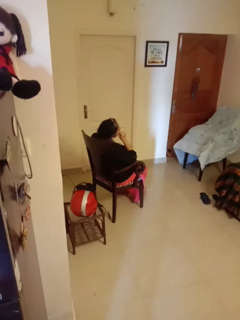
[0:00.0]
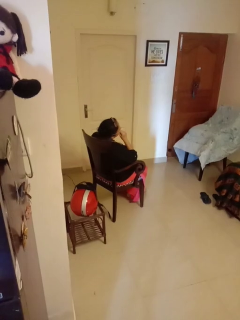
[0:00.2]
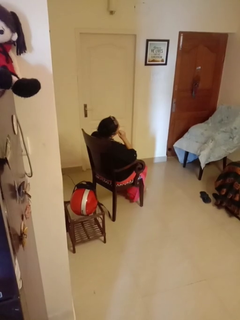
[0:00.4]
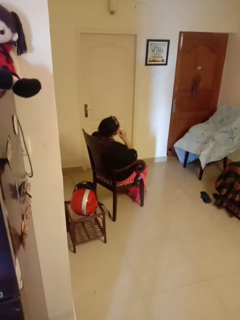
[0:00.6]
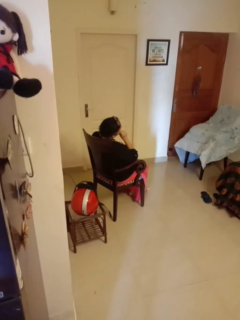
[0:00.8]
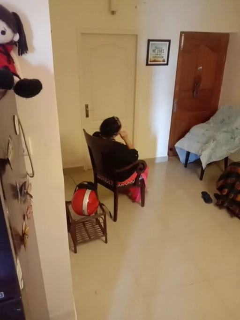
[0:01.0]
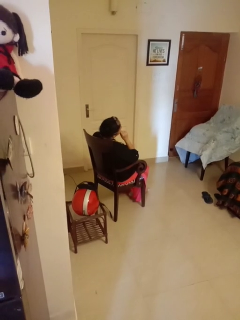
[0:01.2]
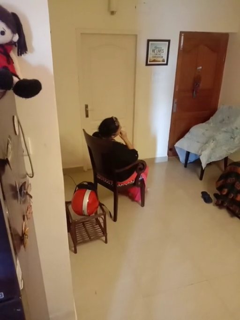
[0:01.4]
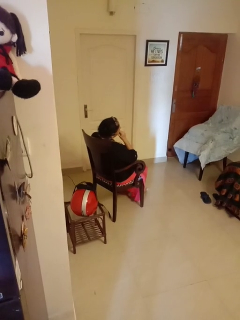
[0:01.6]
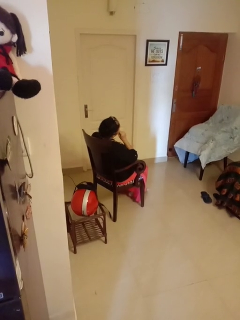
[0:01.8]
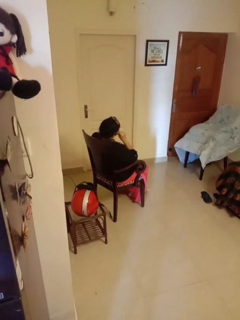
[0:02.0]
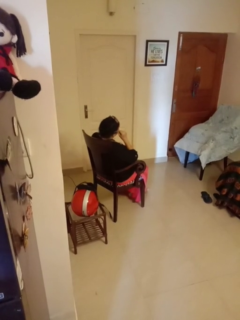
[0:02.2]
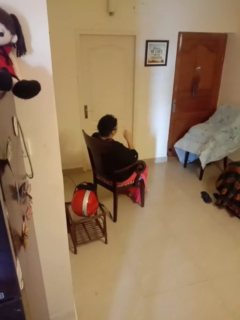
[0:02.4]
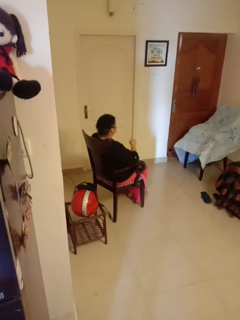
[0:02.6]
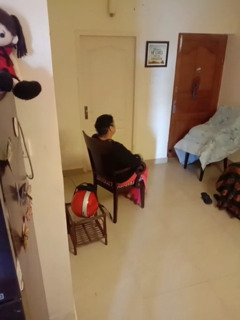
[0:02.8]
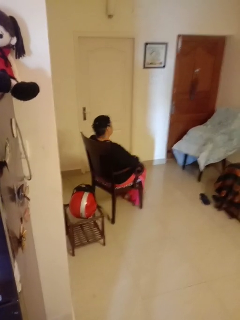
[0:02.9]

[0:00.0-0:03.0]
person strokes chin

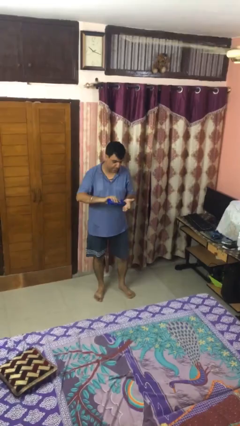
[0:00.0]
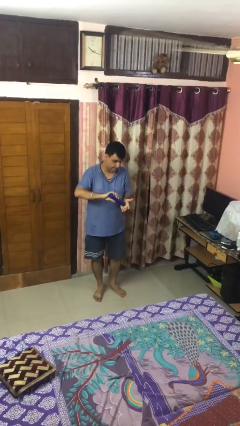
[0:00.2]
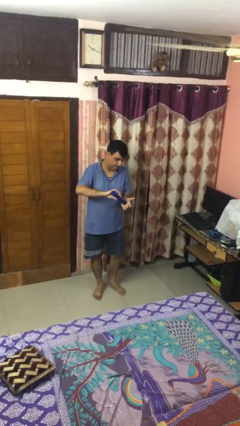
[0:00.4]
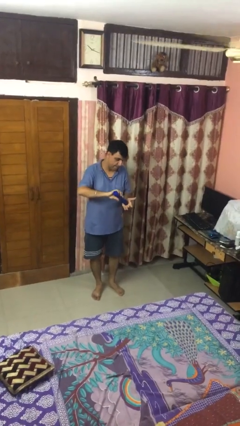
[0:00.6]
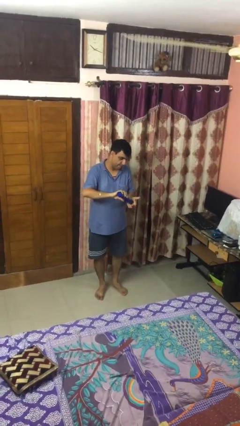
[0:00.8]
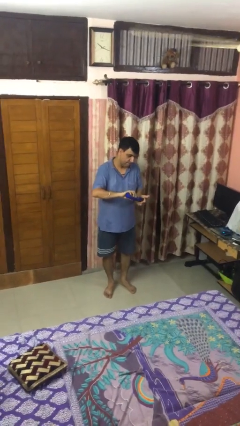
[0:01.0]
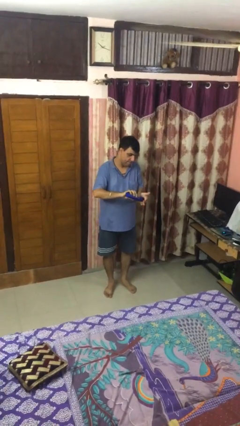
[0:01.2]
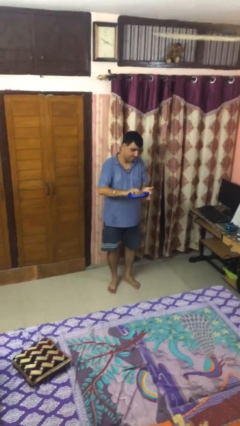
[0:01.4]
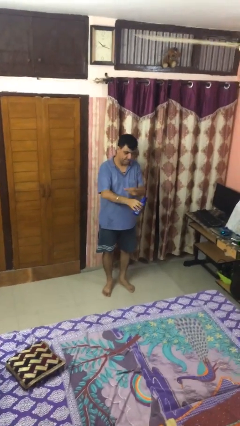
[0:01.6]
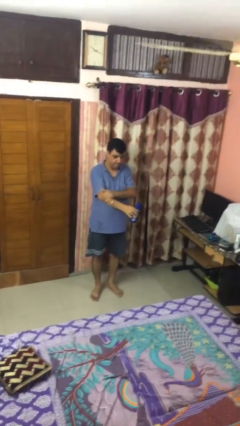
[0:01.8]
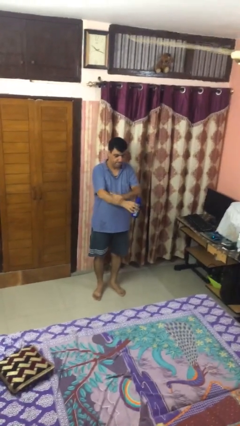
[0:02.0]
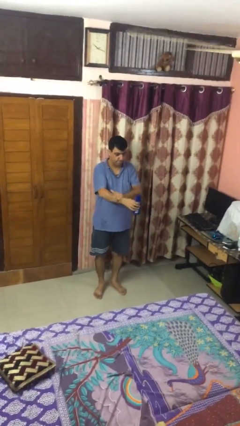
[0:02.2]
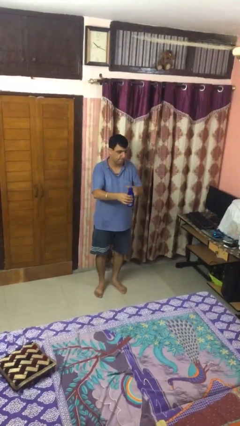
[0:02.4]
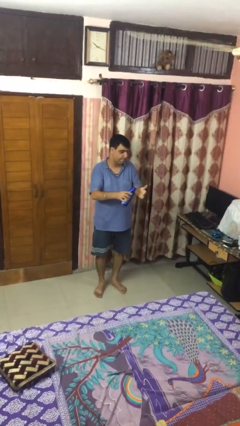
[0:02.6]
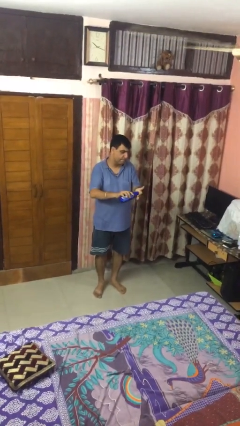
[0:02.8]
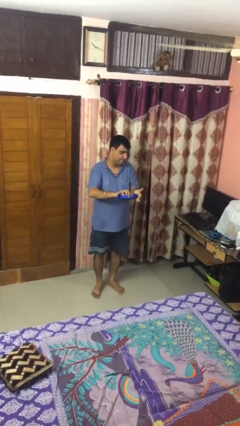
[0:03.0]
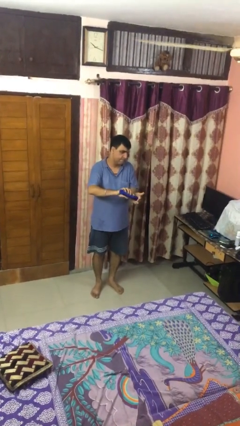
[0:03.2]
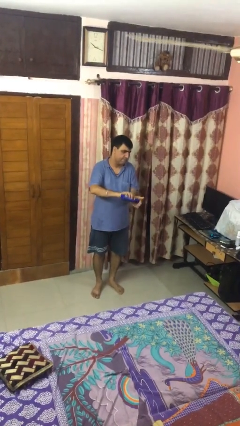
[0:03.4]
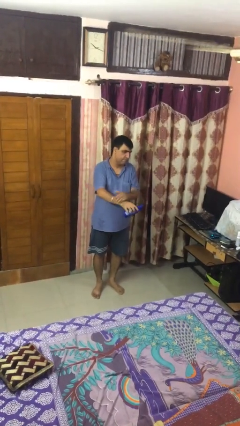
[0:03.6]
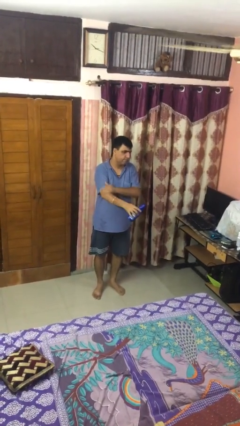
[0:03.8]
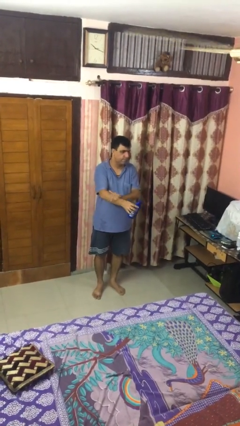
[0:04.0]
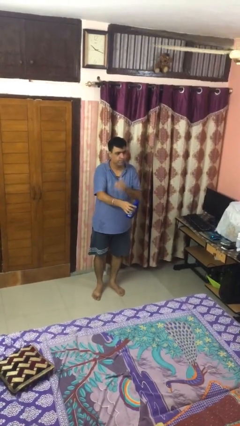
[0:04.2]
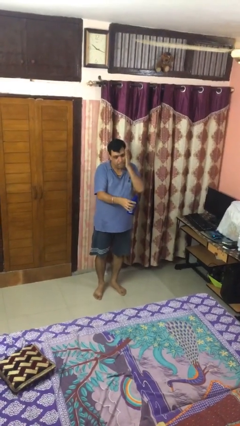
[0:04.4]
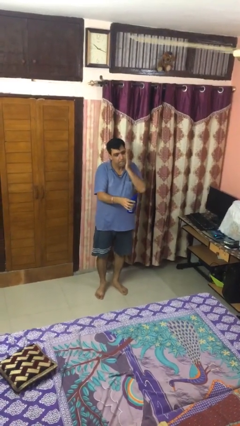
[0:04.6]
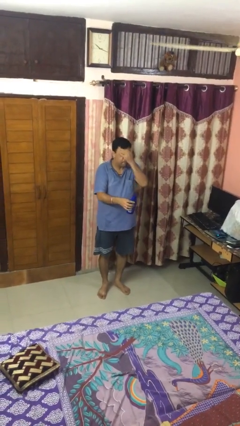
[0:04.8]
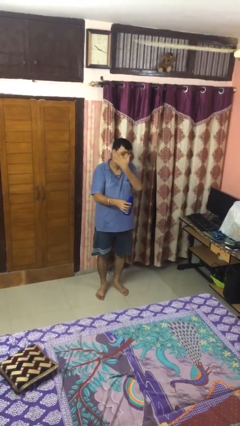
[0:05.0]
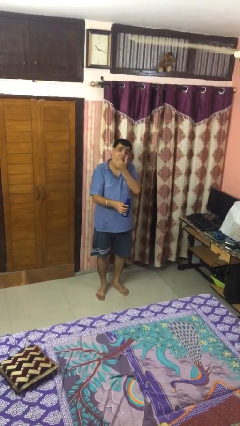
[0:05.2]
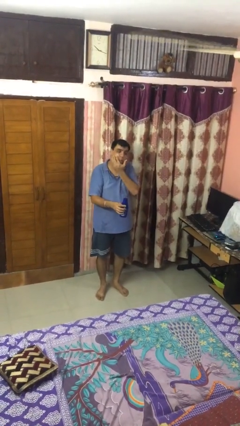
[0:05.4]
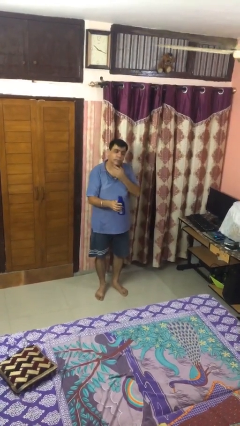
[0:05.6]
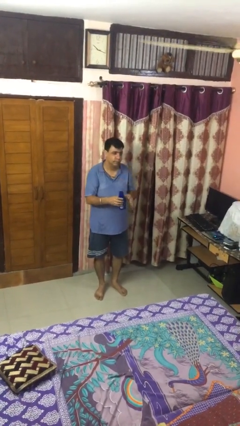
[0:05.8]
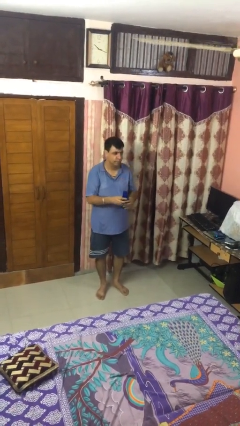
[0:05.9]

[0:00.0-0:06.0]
person applies facial moisturizer

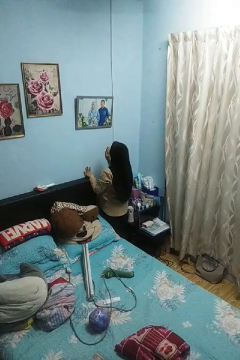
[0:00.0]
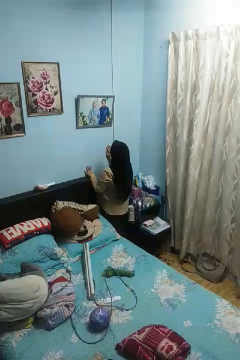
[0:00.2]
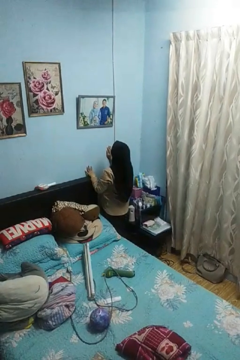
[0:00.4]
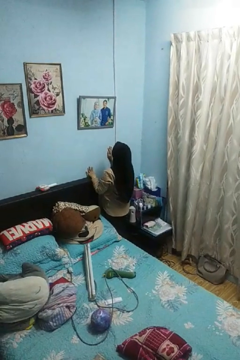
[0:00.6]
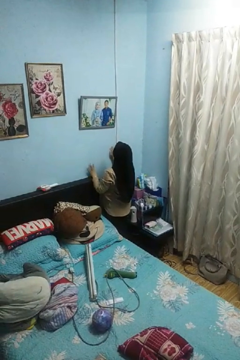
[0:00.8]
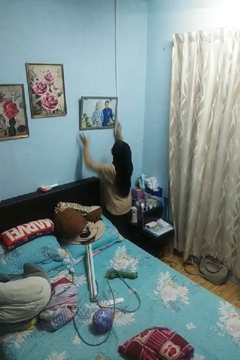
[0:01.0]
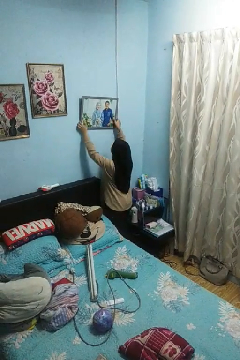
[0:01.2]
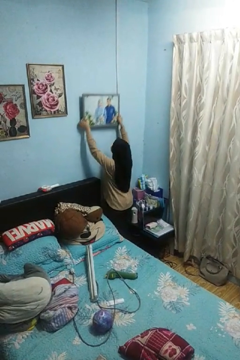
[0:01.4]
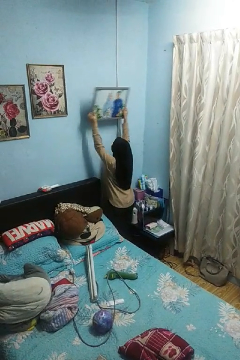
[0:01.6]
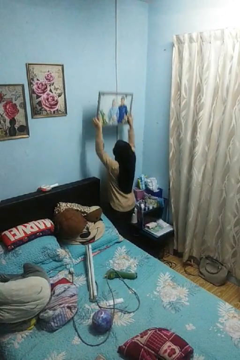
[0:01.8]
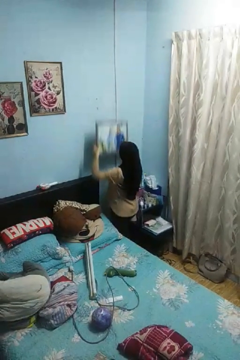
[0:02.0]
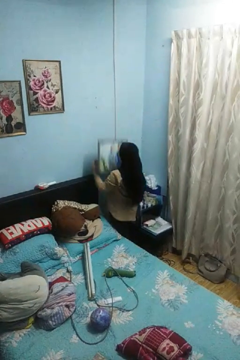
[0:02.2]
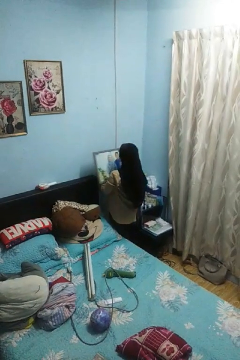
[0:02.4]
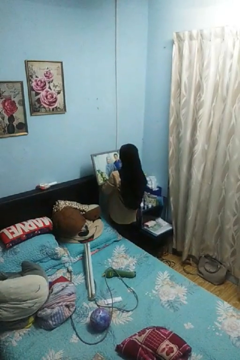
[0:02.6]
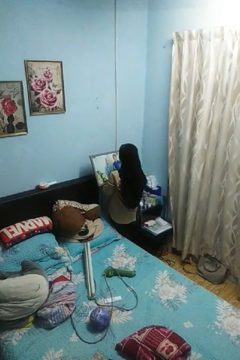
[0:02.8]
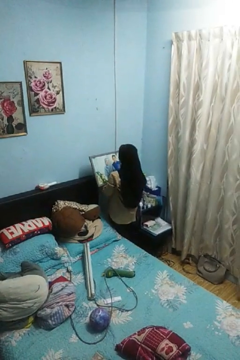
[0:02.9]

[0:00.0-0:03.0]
person takes down picture frame

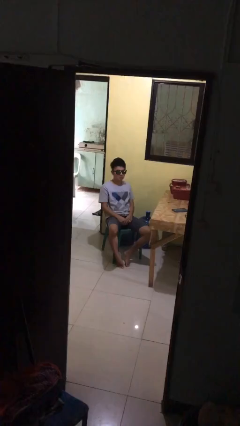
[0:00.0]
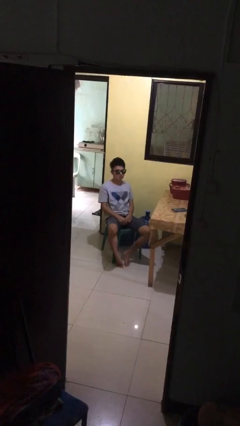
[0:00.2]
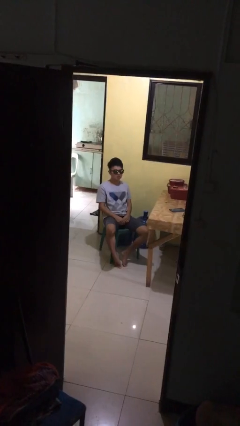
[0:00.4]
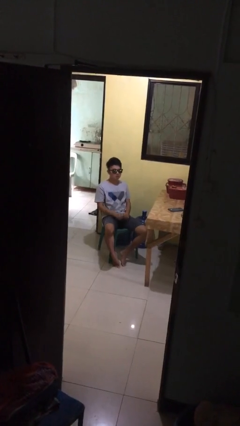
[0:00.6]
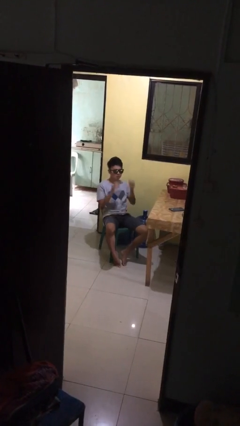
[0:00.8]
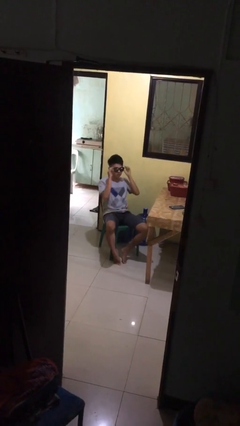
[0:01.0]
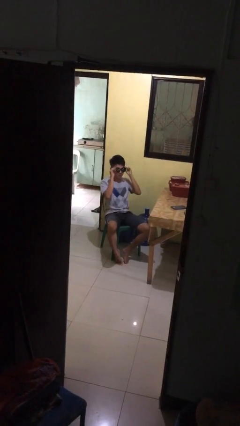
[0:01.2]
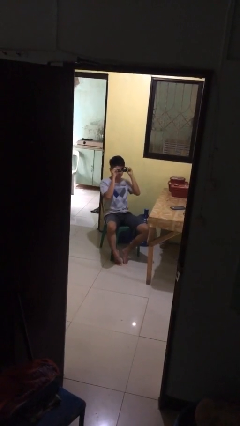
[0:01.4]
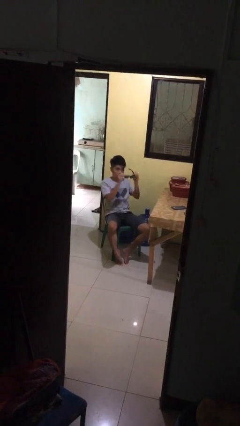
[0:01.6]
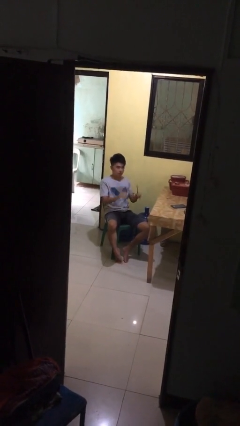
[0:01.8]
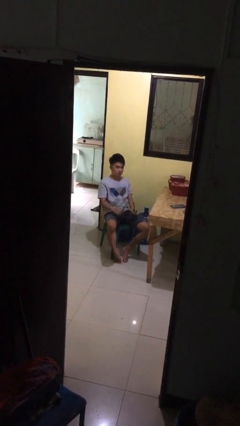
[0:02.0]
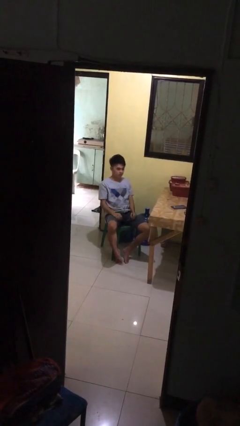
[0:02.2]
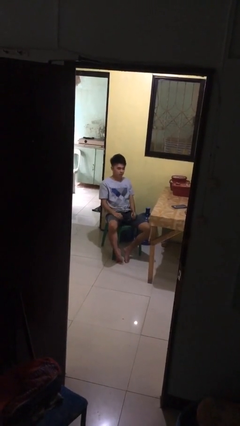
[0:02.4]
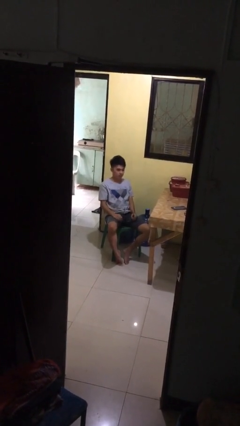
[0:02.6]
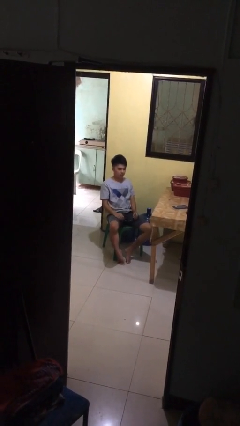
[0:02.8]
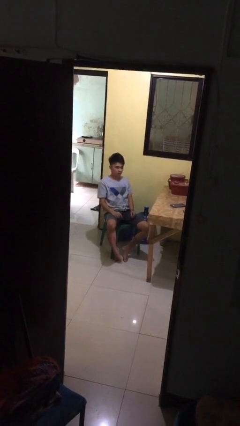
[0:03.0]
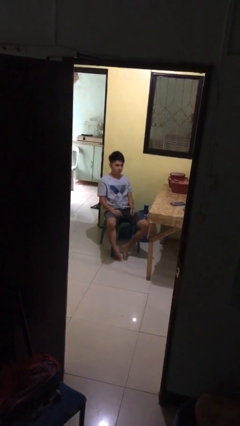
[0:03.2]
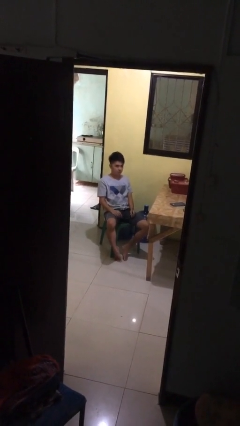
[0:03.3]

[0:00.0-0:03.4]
person takes off sunglasses

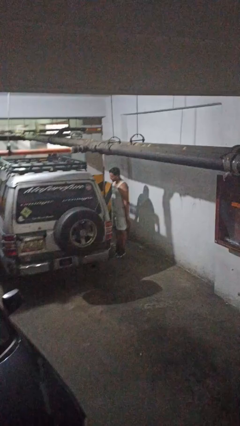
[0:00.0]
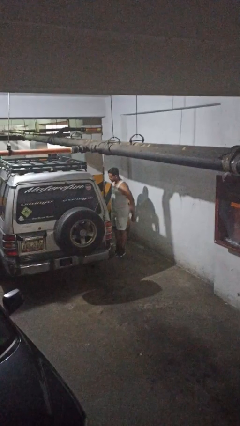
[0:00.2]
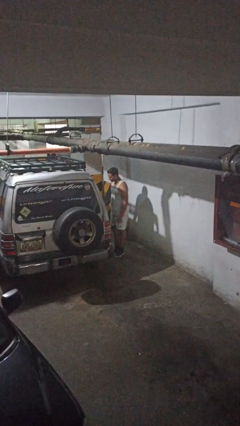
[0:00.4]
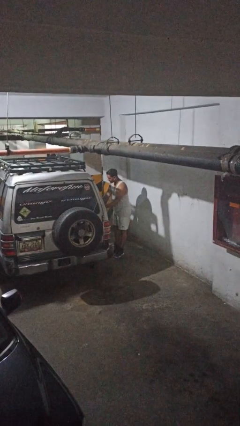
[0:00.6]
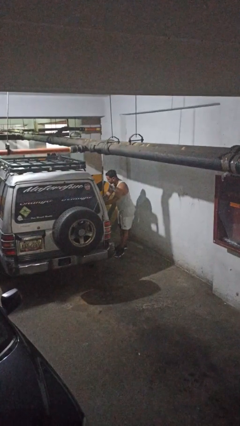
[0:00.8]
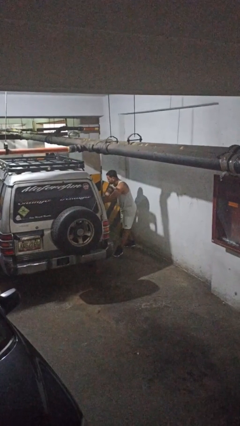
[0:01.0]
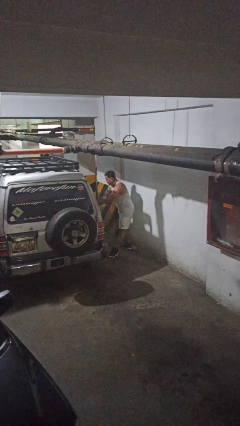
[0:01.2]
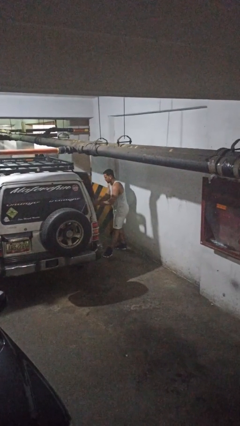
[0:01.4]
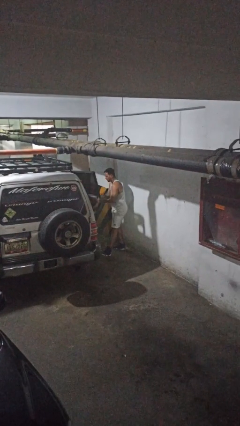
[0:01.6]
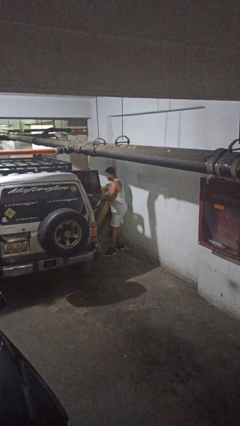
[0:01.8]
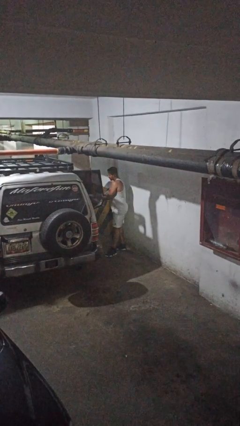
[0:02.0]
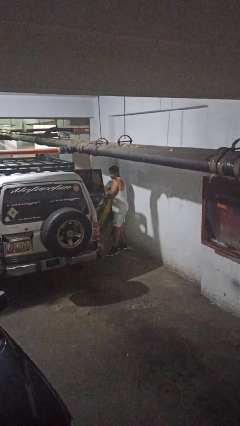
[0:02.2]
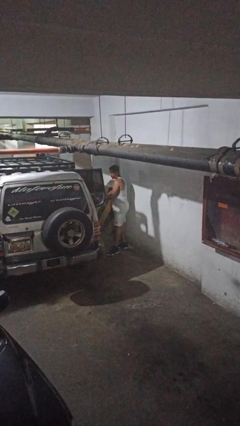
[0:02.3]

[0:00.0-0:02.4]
person opens car door

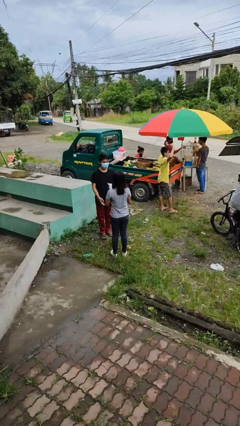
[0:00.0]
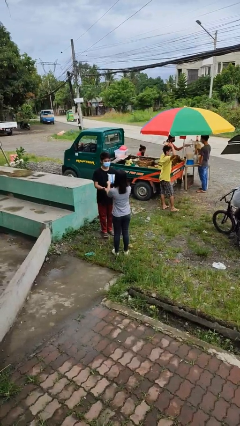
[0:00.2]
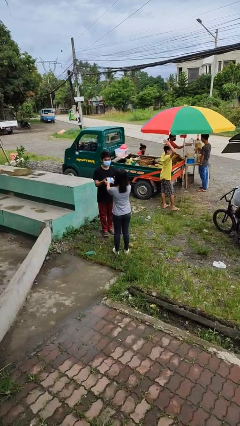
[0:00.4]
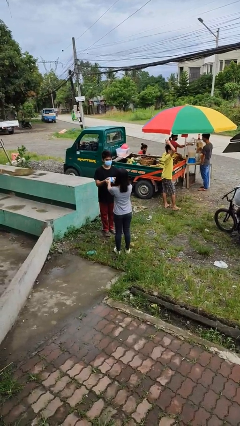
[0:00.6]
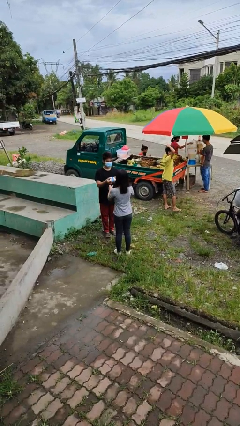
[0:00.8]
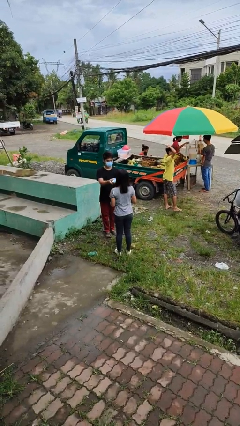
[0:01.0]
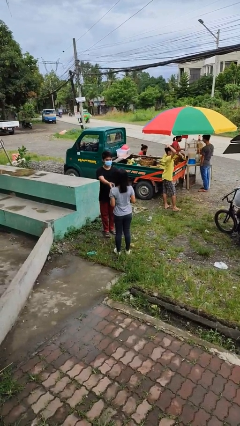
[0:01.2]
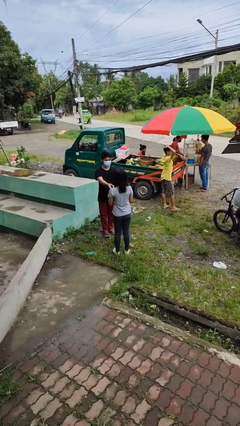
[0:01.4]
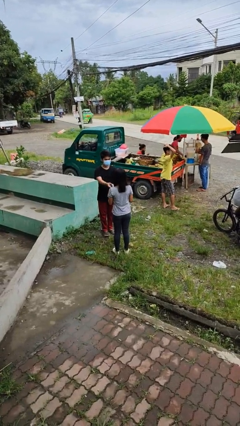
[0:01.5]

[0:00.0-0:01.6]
person transfers object to person
